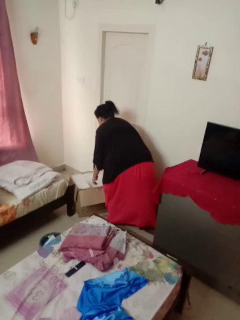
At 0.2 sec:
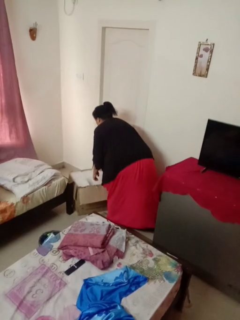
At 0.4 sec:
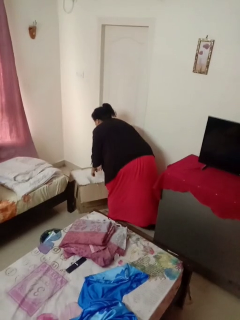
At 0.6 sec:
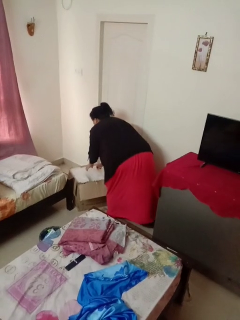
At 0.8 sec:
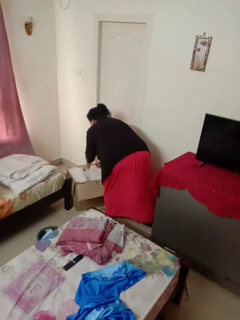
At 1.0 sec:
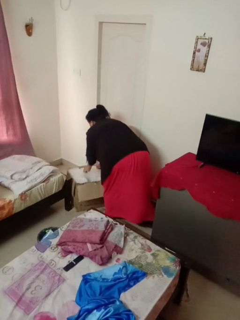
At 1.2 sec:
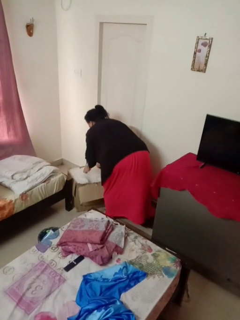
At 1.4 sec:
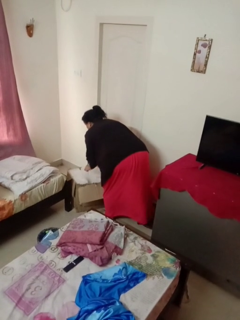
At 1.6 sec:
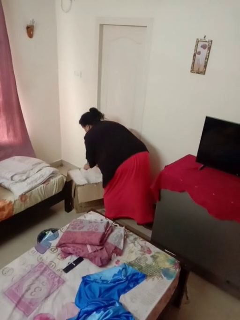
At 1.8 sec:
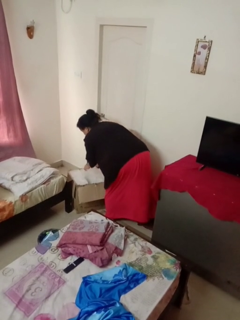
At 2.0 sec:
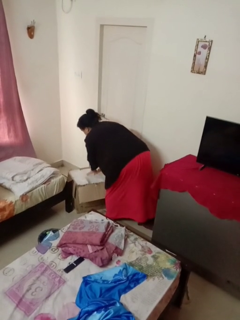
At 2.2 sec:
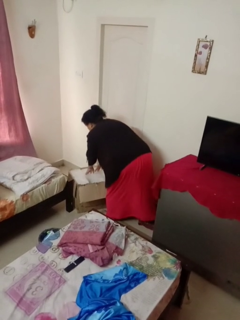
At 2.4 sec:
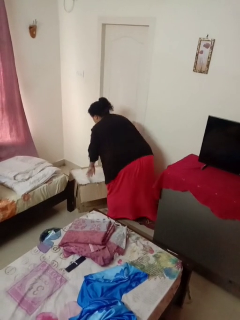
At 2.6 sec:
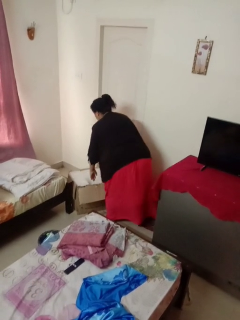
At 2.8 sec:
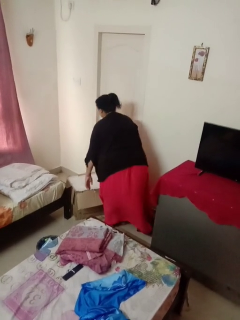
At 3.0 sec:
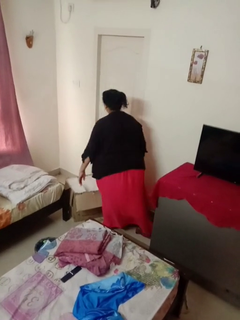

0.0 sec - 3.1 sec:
person searches in box

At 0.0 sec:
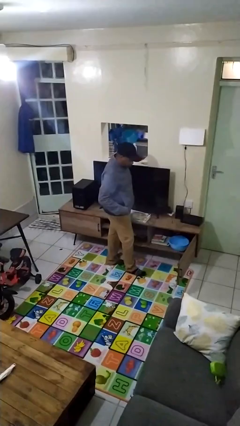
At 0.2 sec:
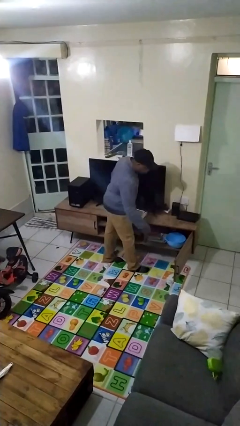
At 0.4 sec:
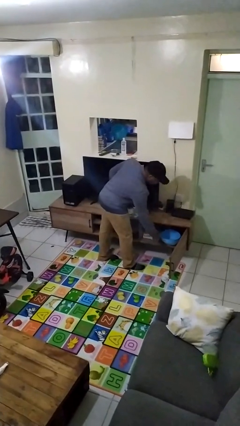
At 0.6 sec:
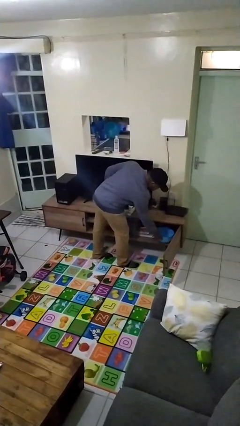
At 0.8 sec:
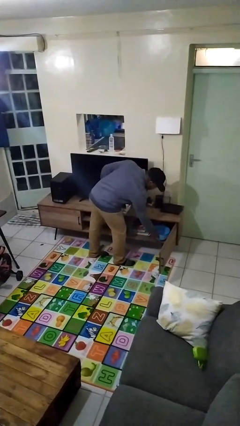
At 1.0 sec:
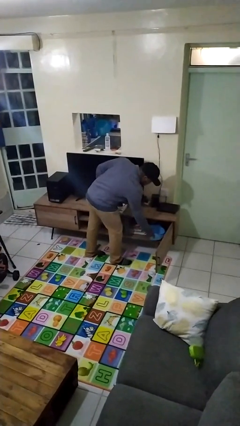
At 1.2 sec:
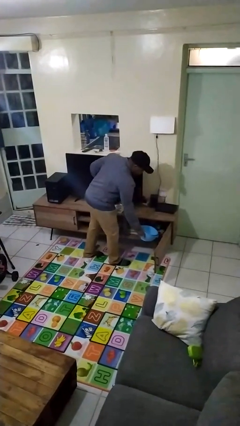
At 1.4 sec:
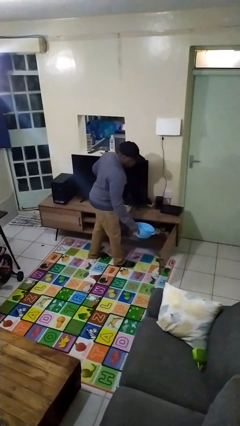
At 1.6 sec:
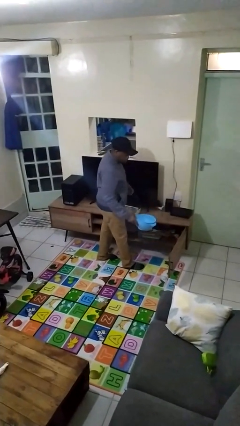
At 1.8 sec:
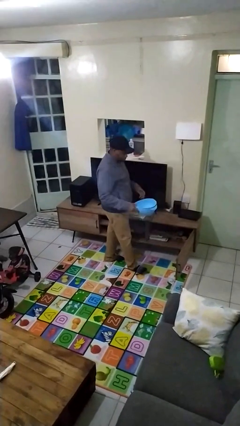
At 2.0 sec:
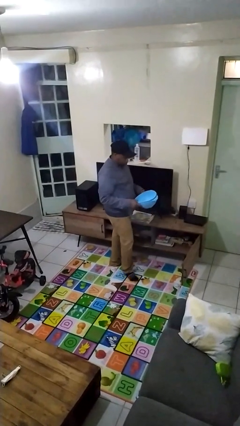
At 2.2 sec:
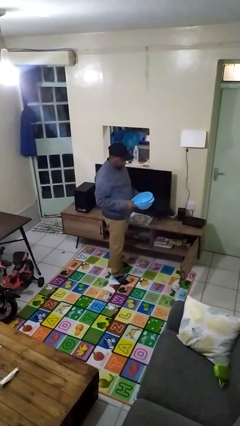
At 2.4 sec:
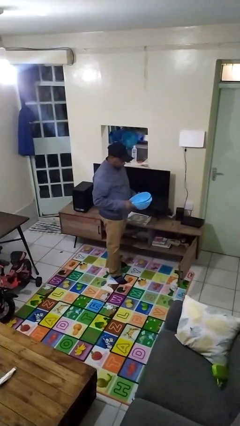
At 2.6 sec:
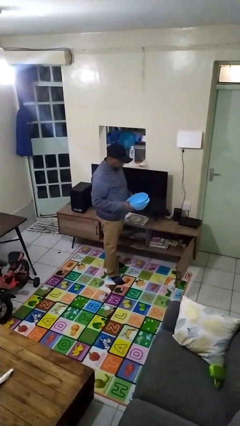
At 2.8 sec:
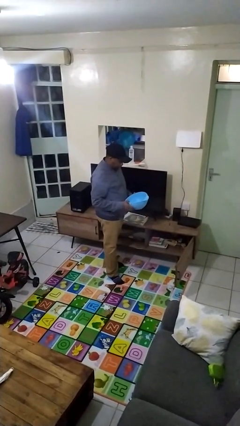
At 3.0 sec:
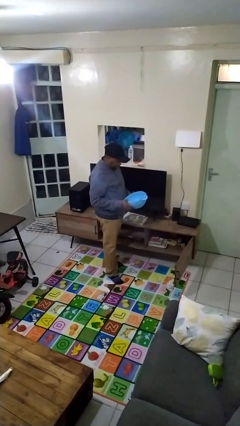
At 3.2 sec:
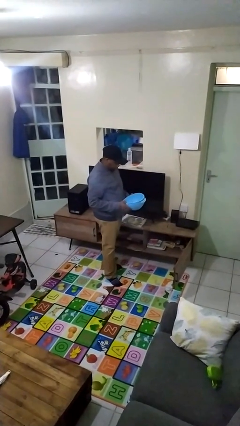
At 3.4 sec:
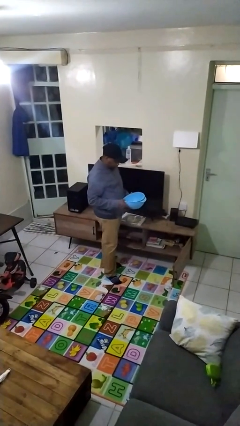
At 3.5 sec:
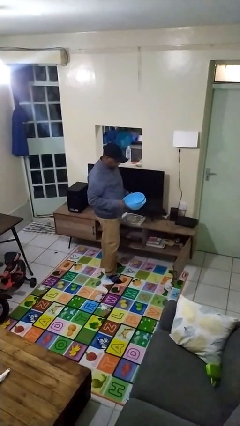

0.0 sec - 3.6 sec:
person picks up object from cabinet

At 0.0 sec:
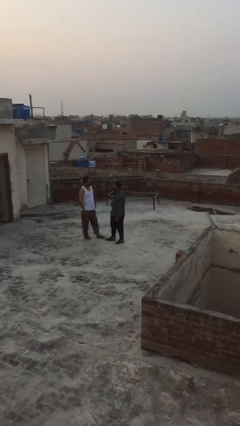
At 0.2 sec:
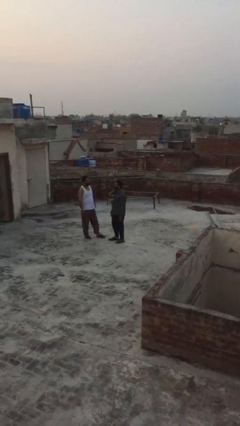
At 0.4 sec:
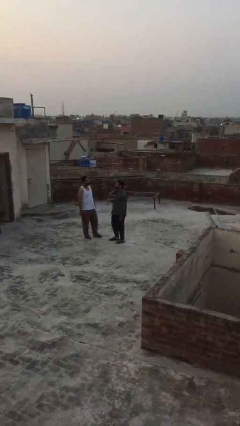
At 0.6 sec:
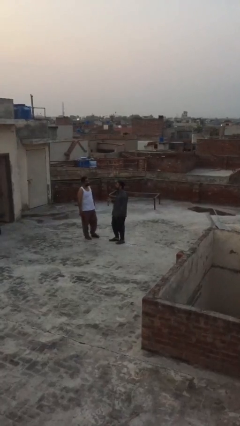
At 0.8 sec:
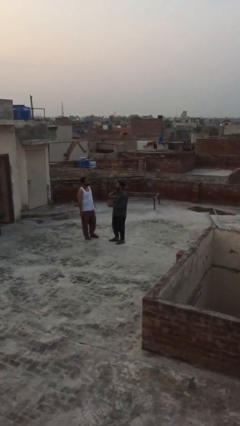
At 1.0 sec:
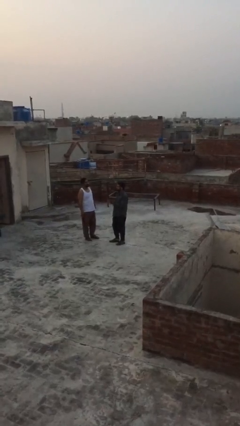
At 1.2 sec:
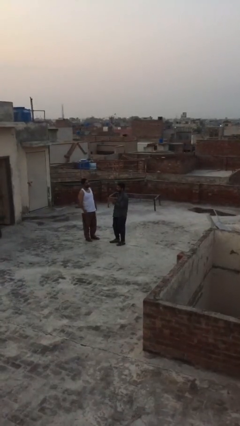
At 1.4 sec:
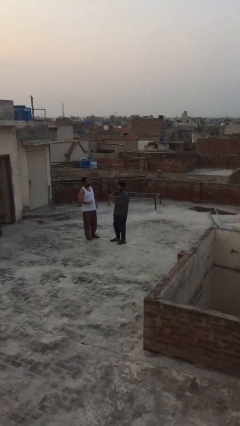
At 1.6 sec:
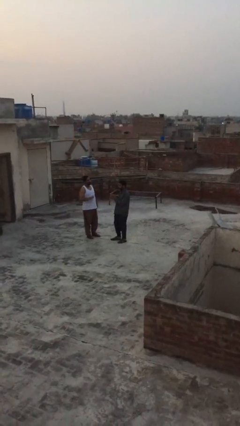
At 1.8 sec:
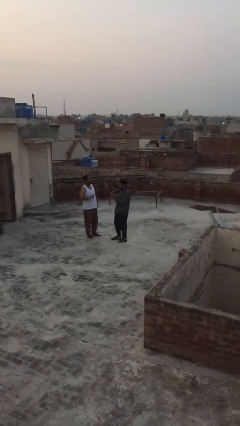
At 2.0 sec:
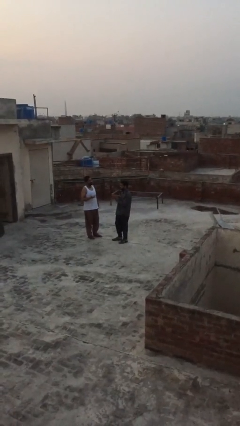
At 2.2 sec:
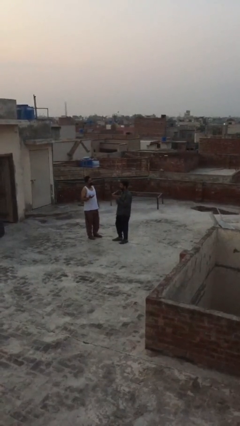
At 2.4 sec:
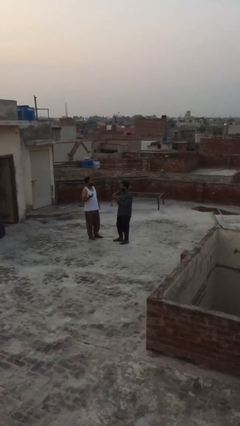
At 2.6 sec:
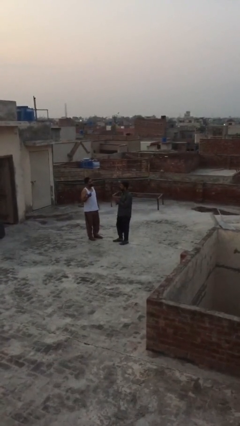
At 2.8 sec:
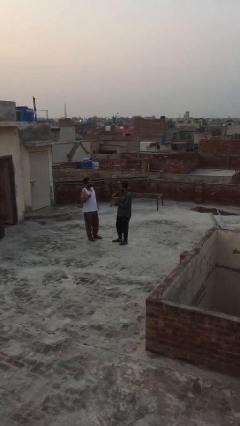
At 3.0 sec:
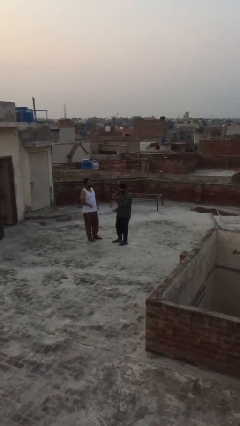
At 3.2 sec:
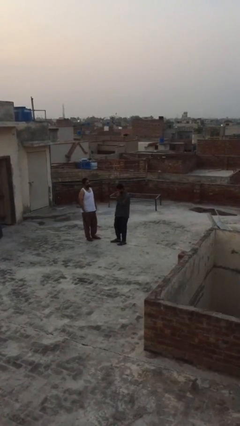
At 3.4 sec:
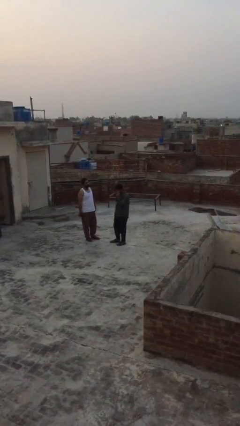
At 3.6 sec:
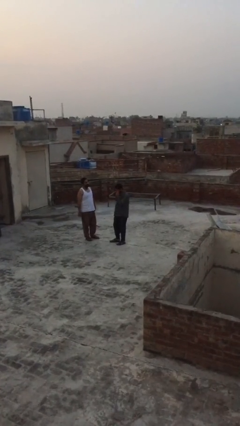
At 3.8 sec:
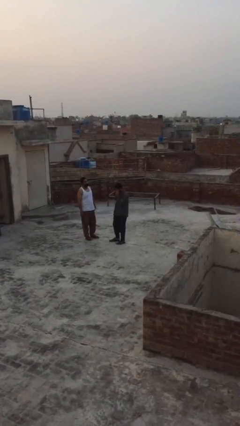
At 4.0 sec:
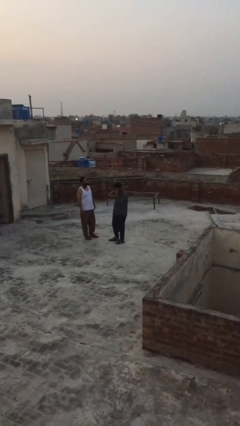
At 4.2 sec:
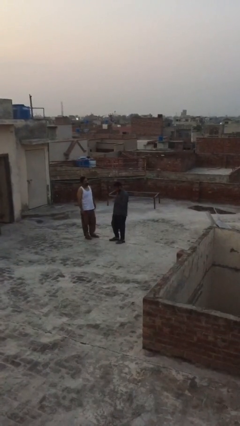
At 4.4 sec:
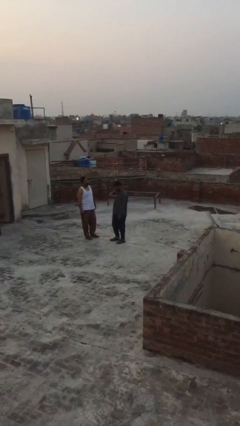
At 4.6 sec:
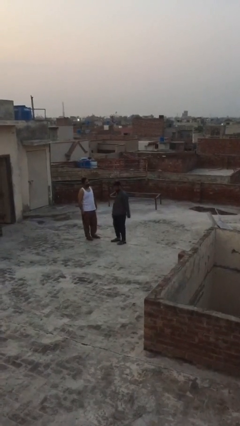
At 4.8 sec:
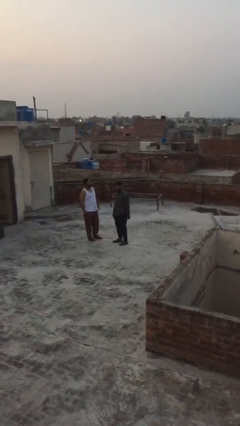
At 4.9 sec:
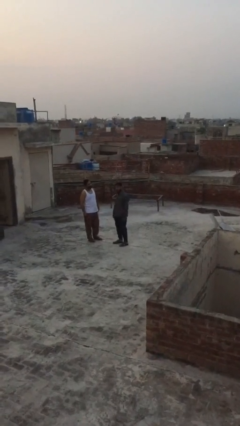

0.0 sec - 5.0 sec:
person talks to person

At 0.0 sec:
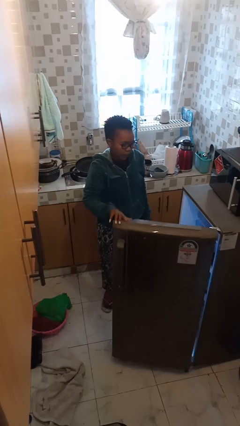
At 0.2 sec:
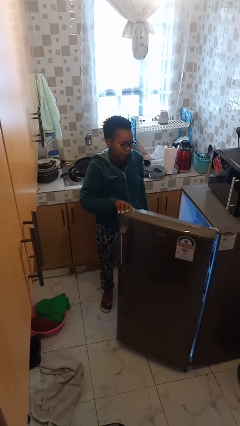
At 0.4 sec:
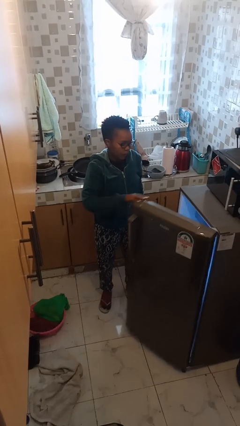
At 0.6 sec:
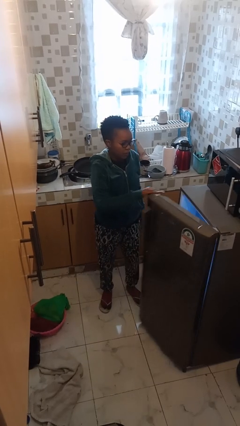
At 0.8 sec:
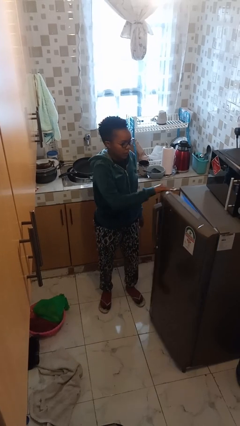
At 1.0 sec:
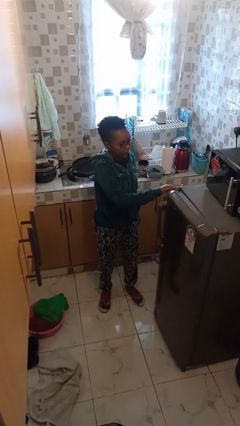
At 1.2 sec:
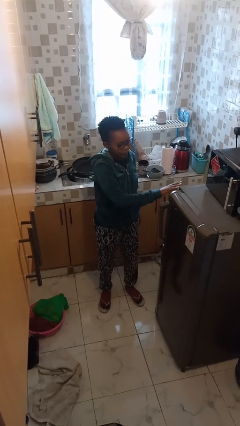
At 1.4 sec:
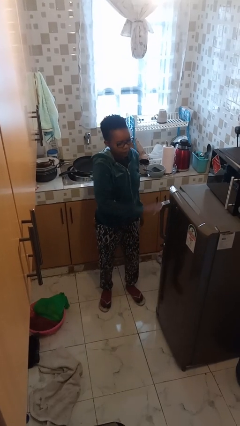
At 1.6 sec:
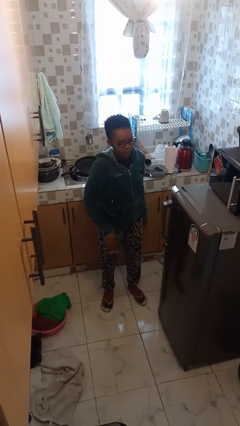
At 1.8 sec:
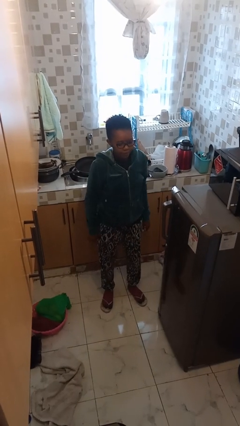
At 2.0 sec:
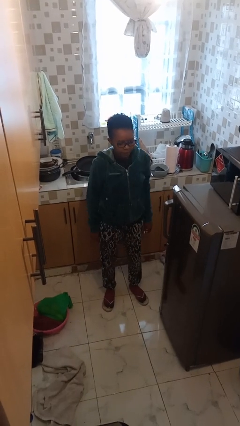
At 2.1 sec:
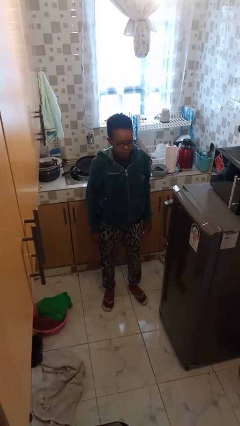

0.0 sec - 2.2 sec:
person closes refrigerator

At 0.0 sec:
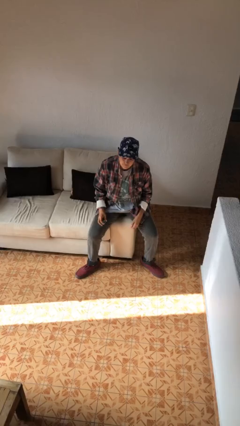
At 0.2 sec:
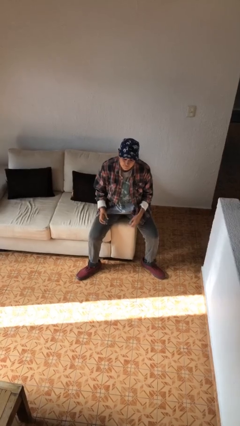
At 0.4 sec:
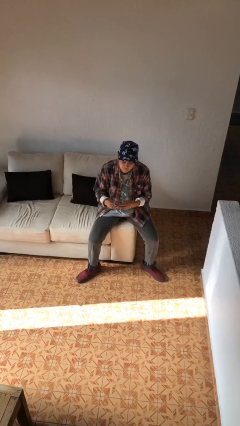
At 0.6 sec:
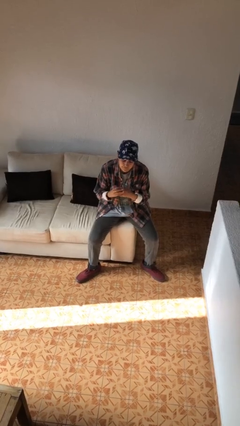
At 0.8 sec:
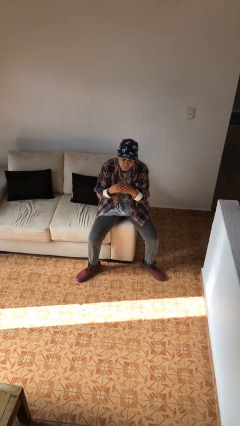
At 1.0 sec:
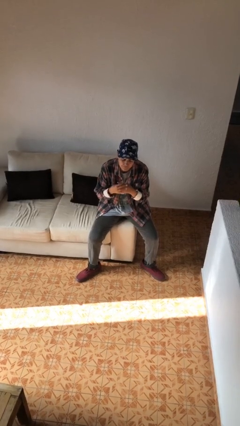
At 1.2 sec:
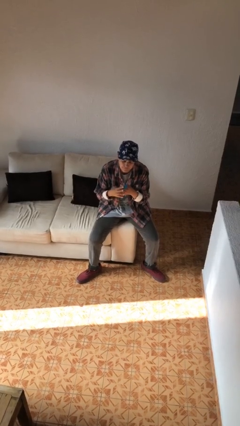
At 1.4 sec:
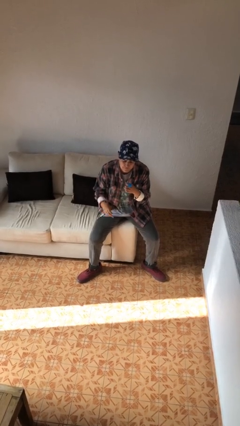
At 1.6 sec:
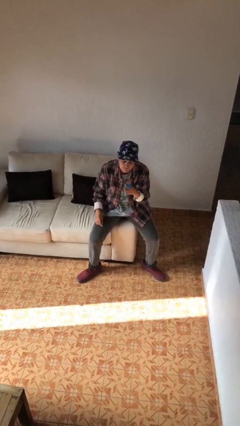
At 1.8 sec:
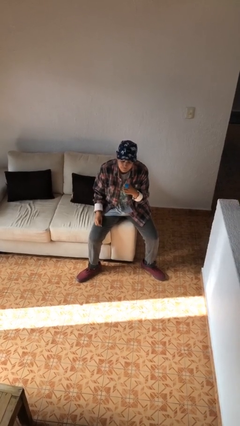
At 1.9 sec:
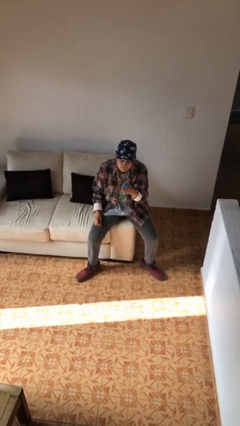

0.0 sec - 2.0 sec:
person puts on ring

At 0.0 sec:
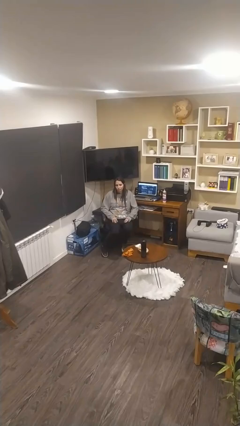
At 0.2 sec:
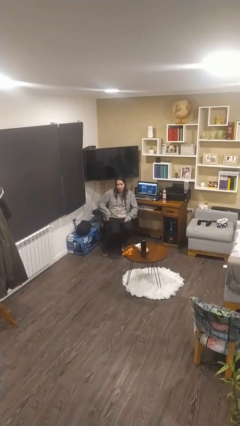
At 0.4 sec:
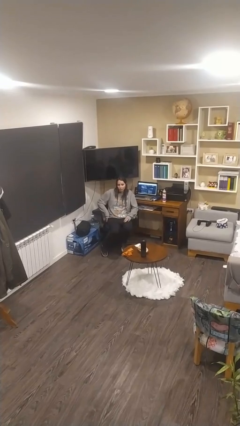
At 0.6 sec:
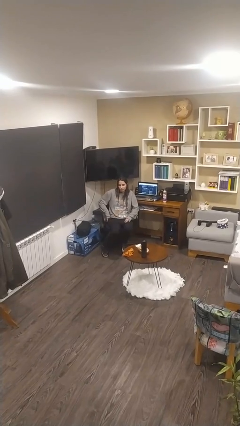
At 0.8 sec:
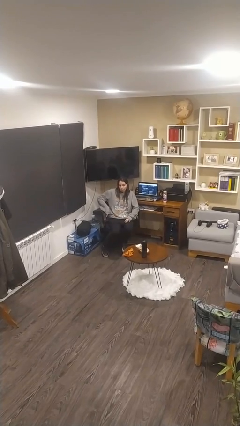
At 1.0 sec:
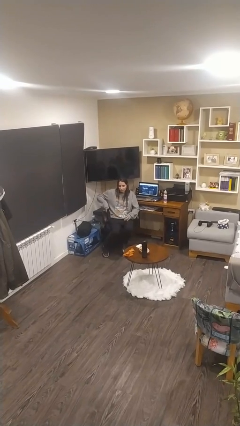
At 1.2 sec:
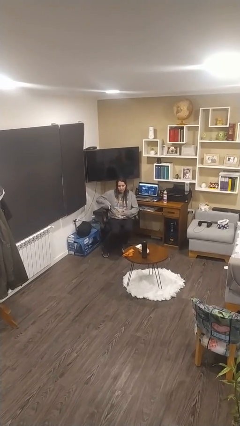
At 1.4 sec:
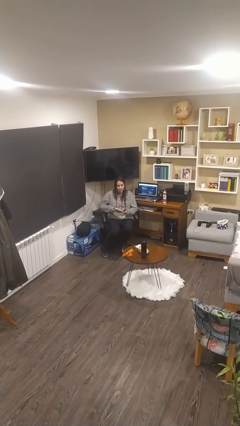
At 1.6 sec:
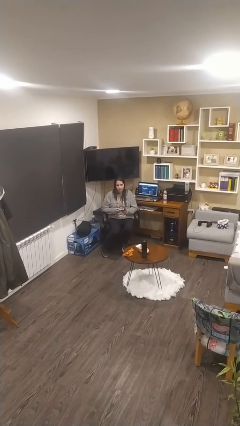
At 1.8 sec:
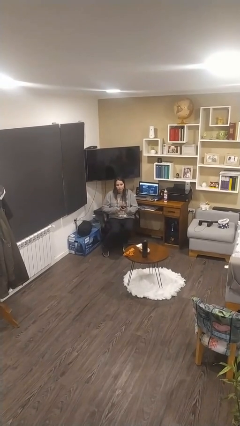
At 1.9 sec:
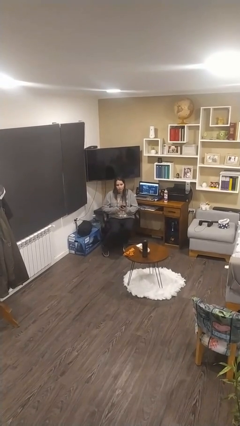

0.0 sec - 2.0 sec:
person takes phone from pocket
